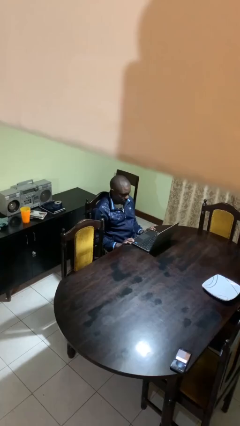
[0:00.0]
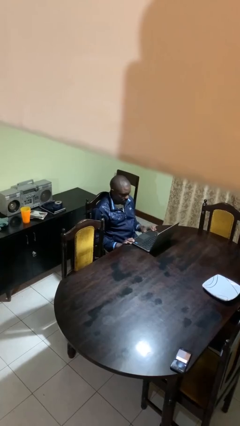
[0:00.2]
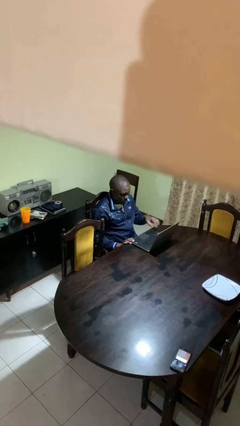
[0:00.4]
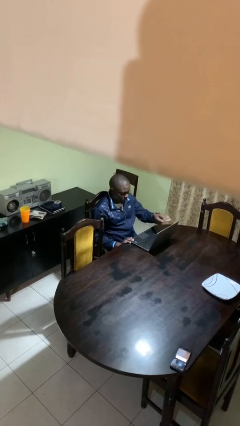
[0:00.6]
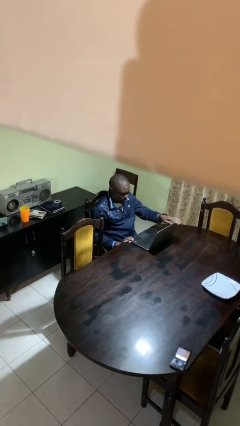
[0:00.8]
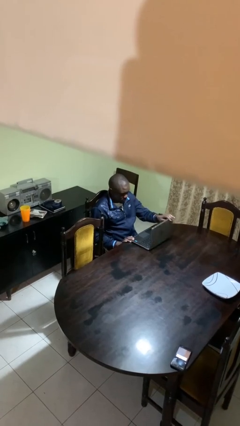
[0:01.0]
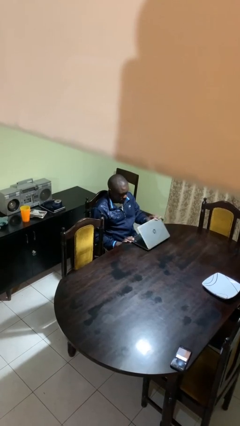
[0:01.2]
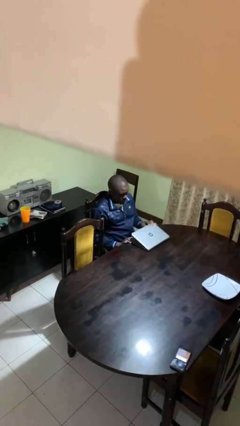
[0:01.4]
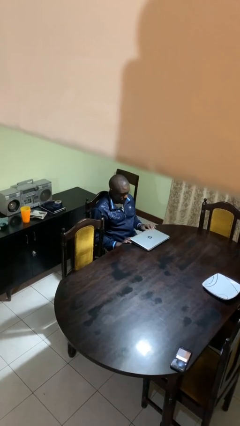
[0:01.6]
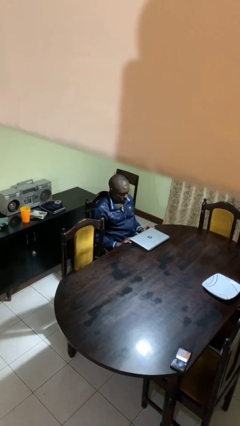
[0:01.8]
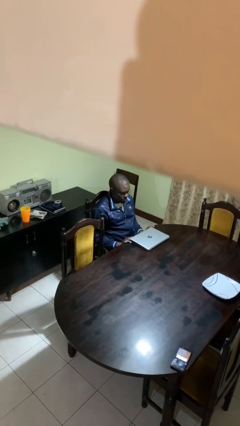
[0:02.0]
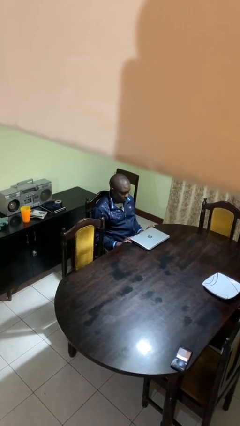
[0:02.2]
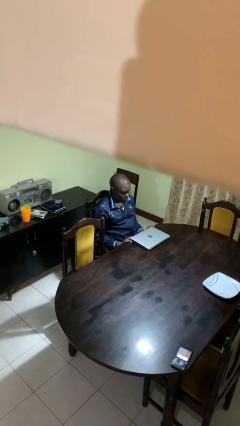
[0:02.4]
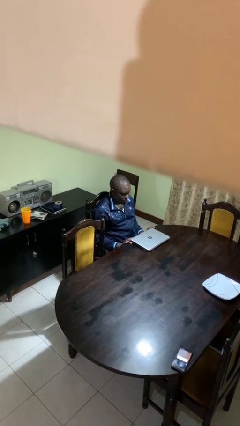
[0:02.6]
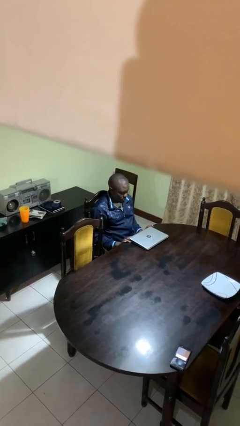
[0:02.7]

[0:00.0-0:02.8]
person closes laptop

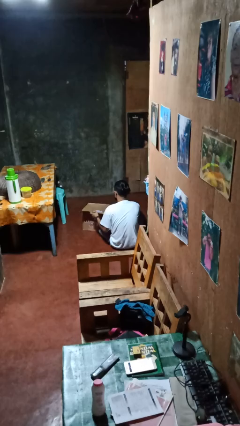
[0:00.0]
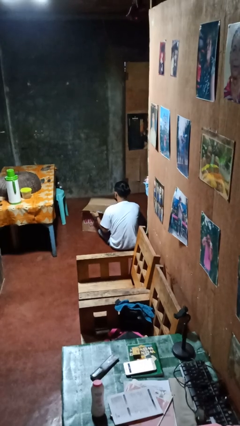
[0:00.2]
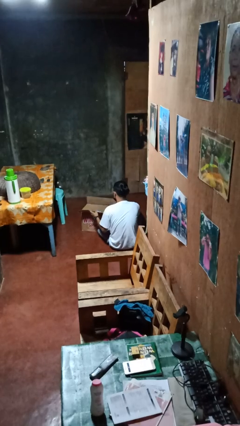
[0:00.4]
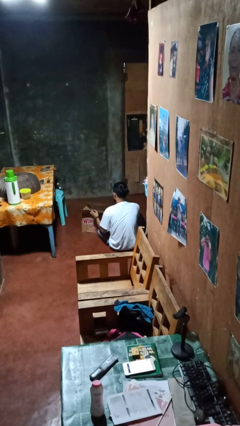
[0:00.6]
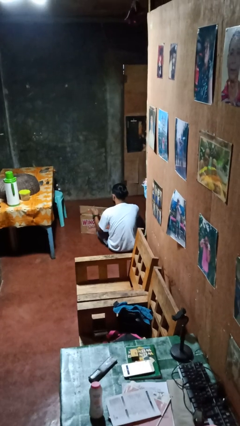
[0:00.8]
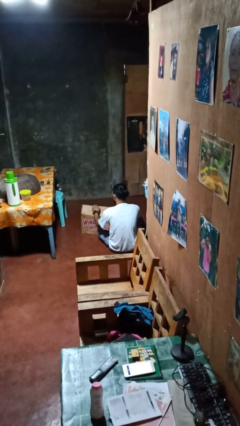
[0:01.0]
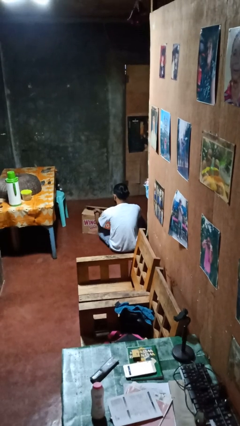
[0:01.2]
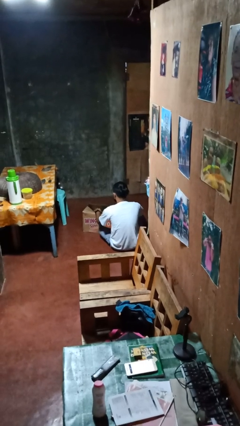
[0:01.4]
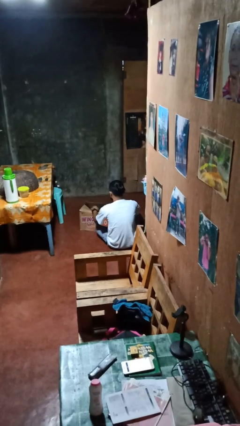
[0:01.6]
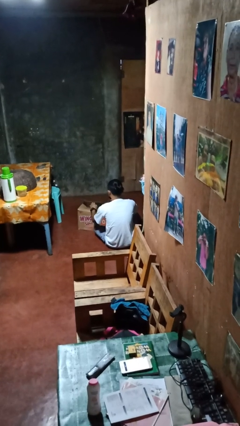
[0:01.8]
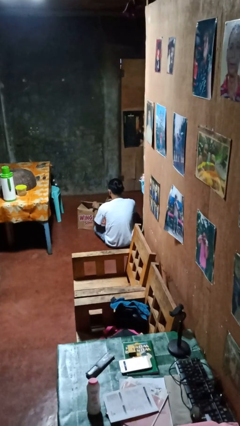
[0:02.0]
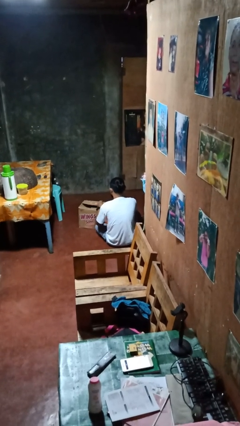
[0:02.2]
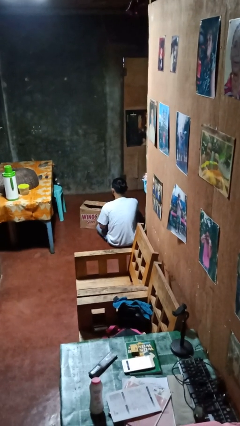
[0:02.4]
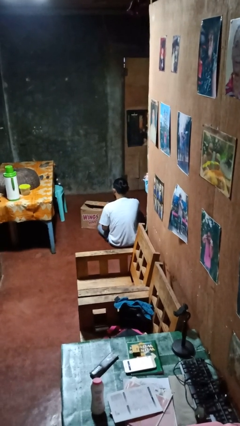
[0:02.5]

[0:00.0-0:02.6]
person closes box

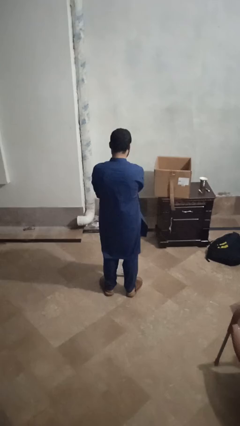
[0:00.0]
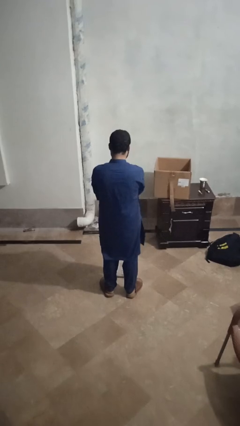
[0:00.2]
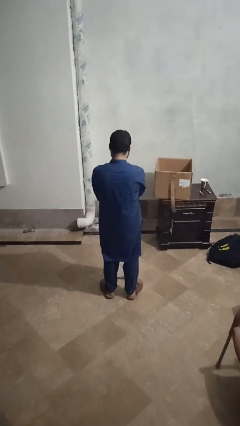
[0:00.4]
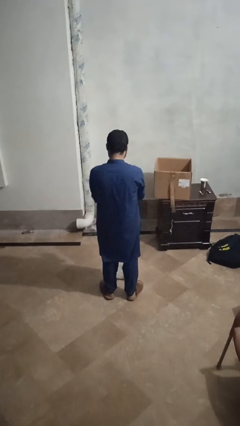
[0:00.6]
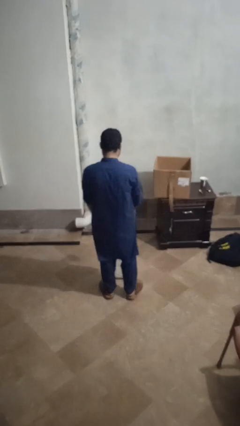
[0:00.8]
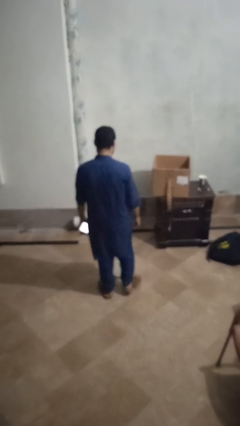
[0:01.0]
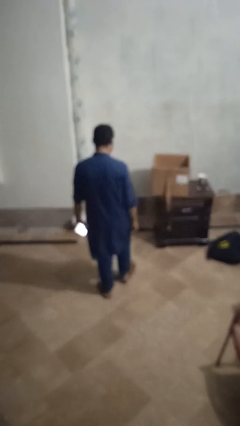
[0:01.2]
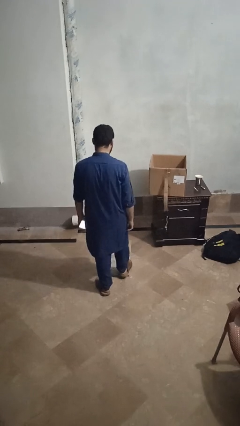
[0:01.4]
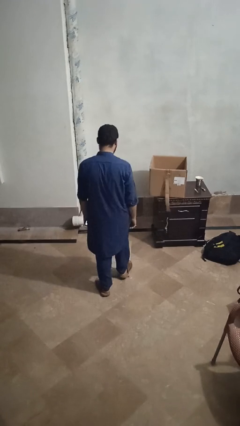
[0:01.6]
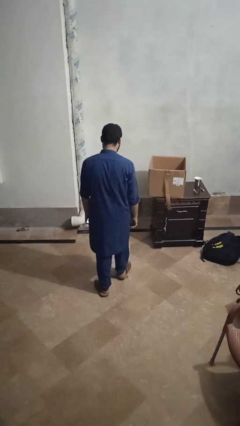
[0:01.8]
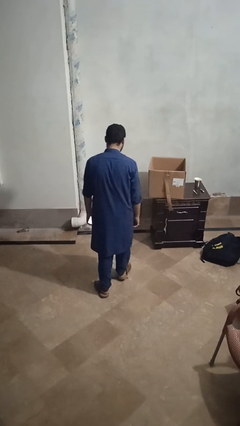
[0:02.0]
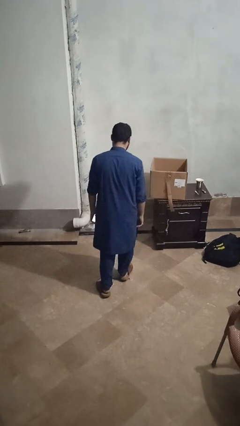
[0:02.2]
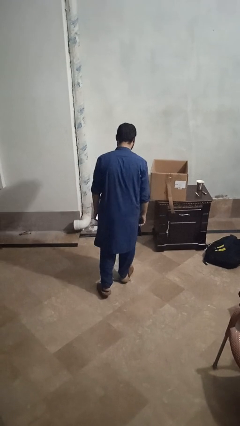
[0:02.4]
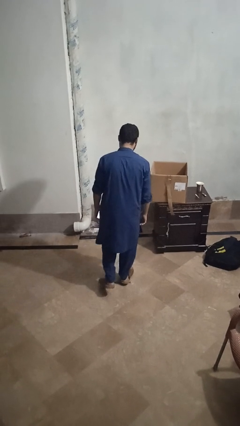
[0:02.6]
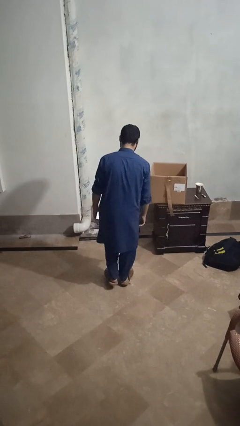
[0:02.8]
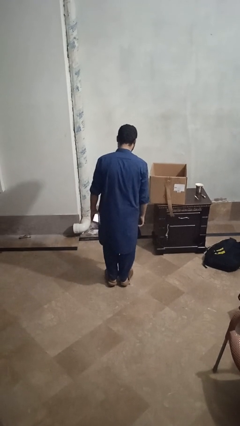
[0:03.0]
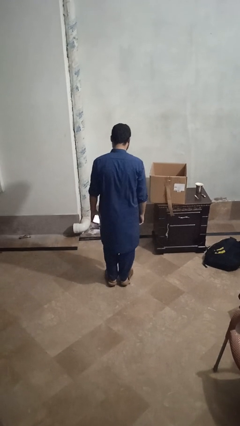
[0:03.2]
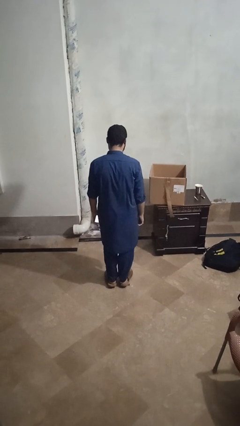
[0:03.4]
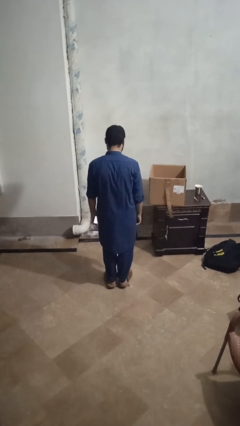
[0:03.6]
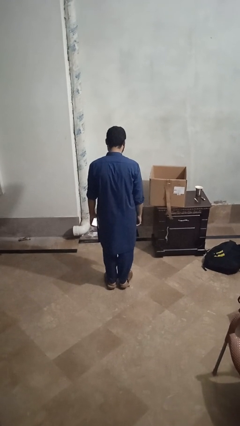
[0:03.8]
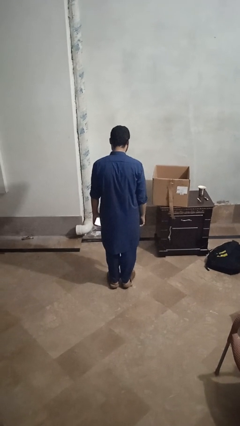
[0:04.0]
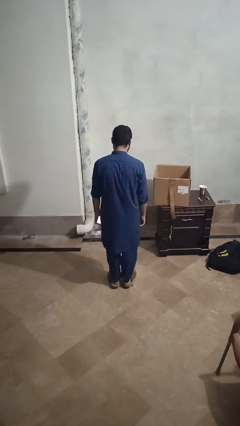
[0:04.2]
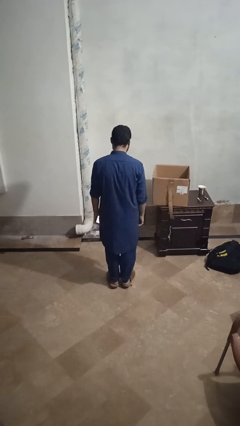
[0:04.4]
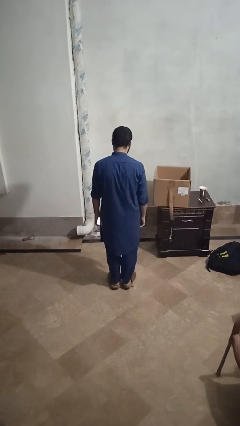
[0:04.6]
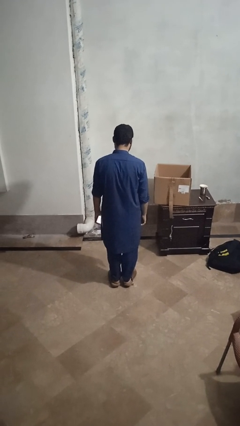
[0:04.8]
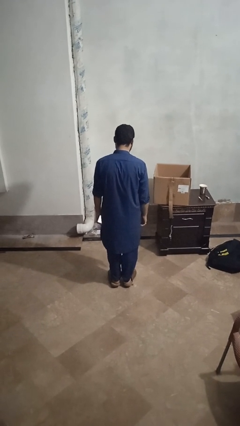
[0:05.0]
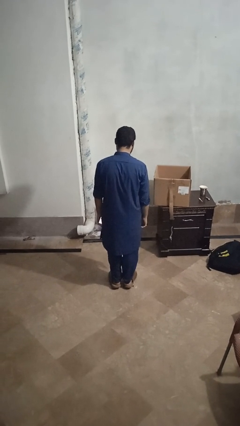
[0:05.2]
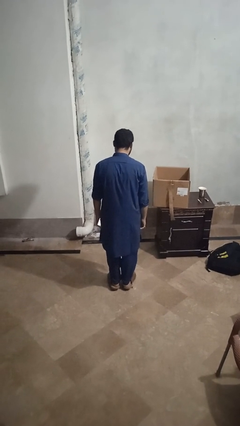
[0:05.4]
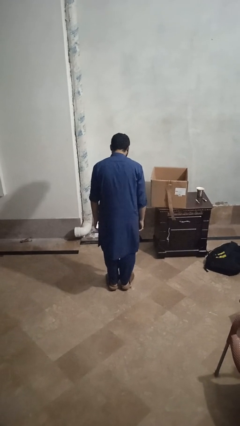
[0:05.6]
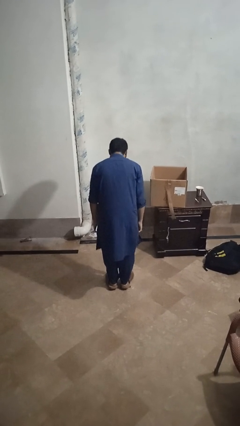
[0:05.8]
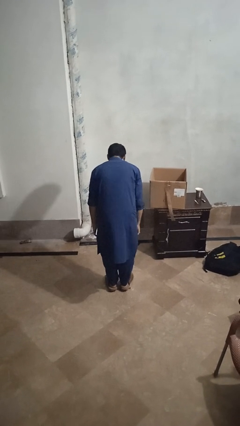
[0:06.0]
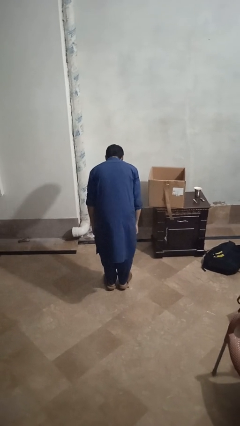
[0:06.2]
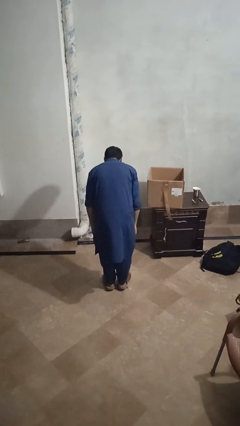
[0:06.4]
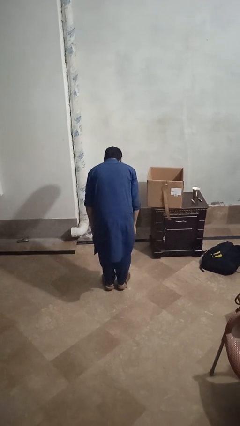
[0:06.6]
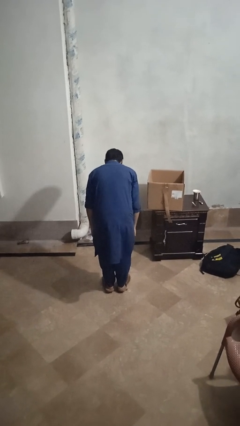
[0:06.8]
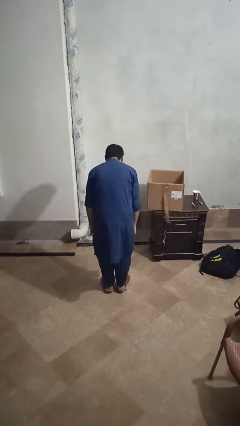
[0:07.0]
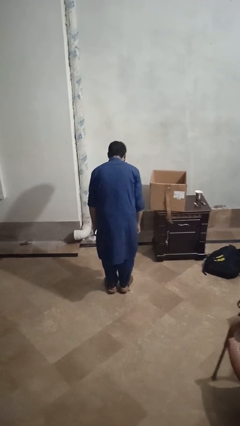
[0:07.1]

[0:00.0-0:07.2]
person uses bodyweight scale

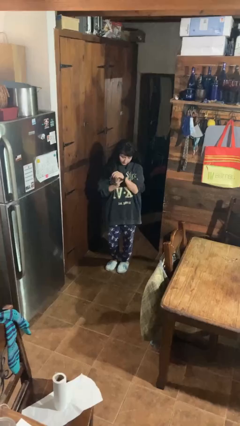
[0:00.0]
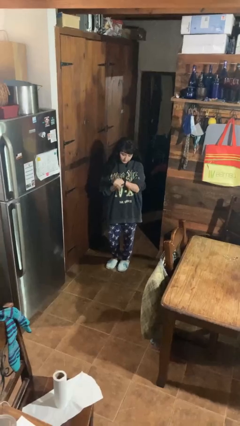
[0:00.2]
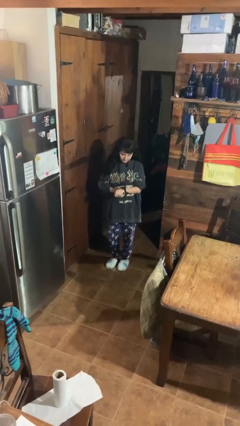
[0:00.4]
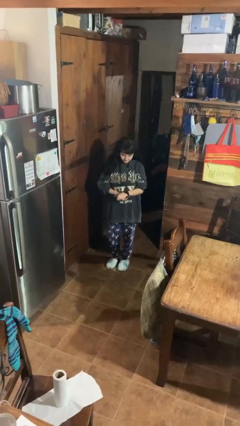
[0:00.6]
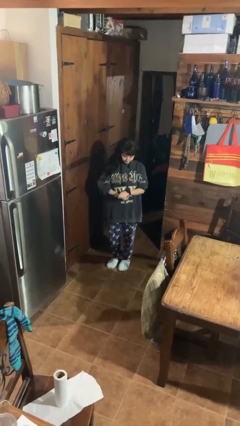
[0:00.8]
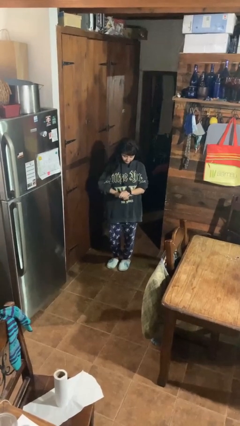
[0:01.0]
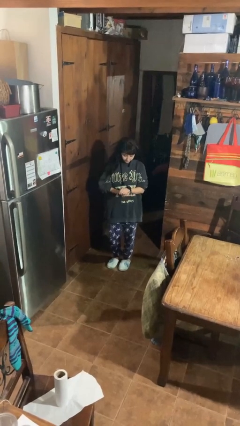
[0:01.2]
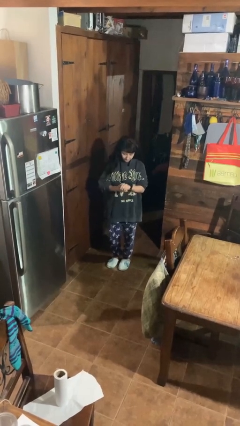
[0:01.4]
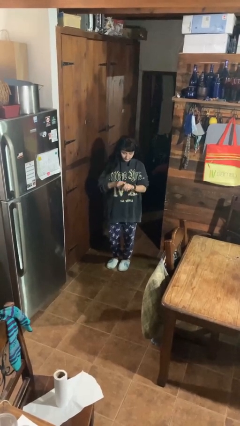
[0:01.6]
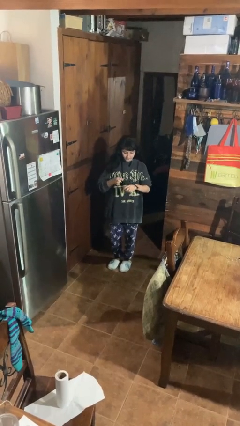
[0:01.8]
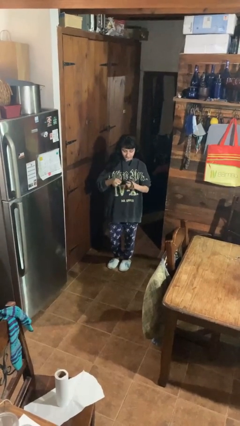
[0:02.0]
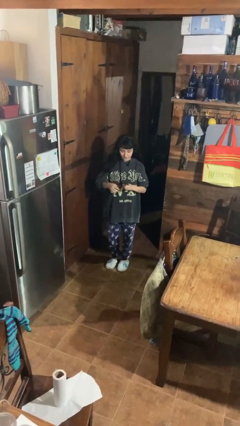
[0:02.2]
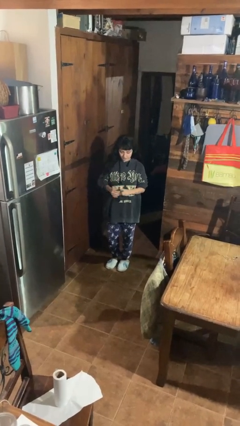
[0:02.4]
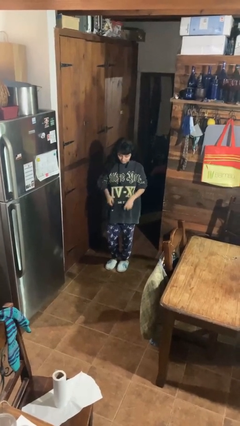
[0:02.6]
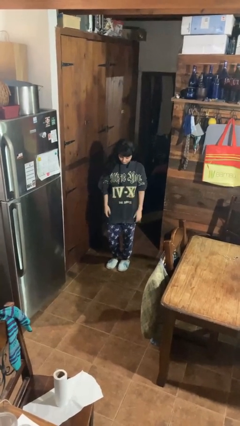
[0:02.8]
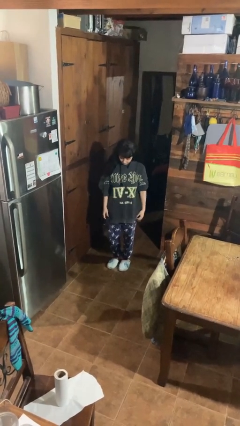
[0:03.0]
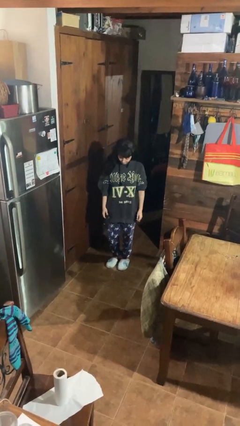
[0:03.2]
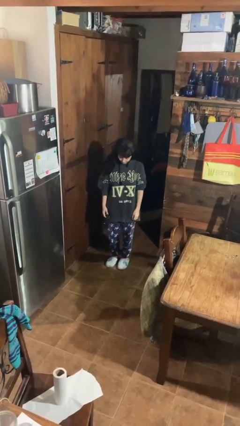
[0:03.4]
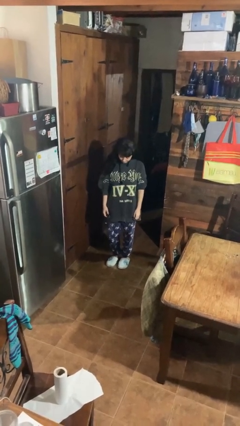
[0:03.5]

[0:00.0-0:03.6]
person takes off wristwatch

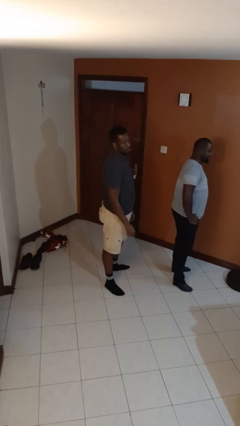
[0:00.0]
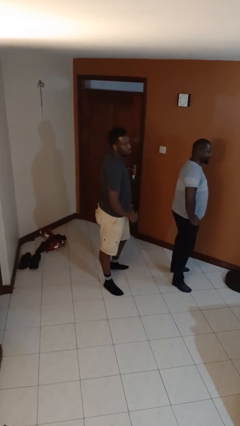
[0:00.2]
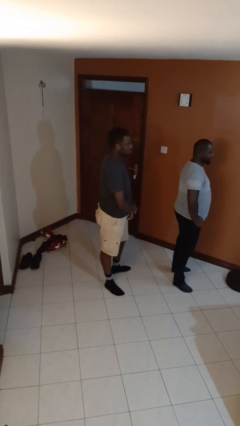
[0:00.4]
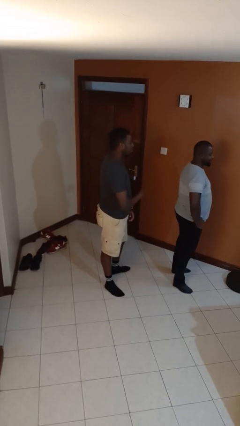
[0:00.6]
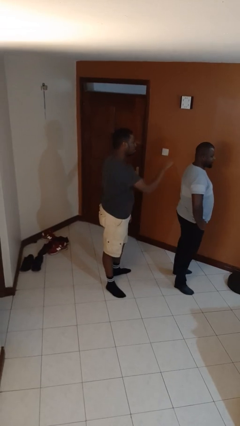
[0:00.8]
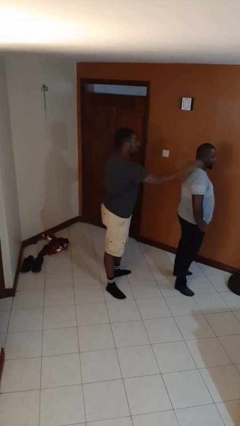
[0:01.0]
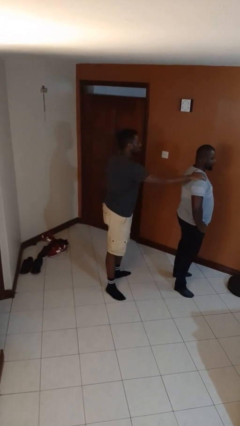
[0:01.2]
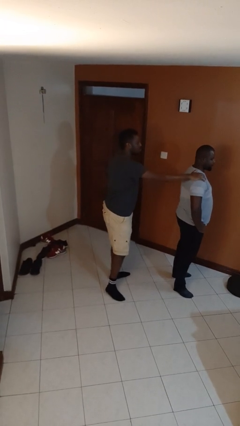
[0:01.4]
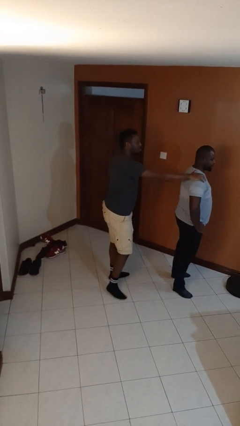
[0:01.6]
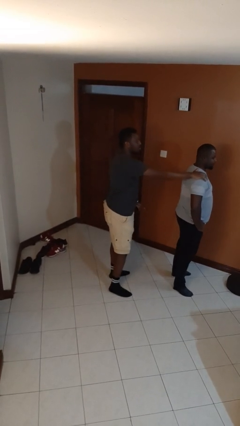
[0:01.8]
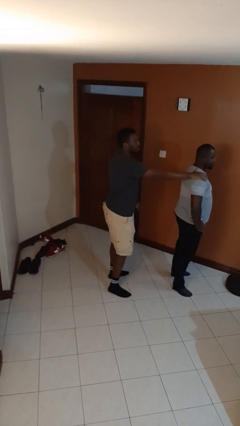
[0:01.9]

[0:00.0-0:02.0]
person grabs person by shoulder
